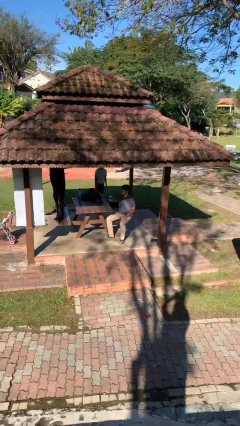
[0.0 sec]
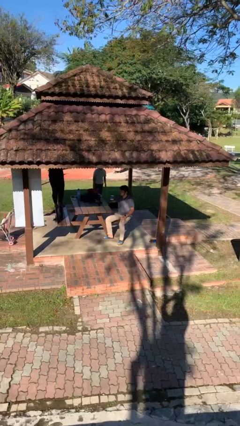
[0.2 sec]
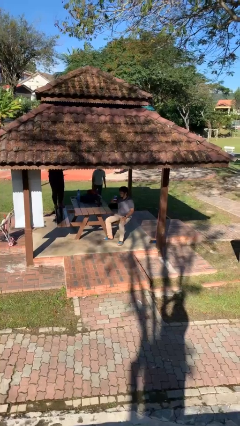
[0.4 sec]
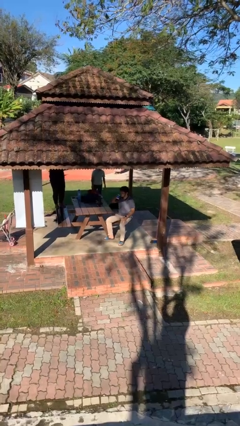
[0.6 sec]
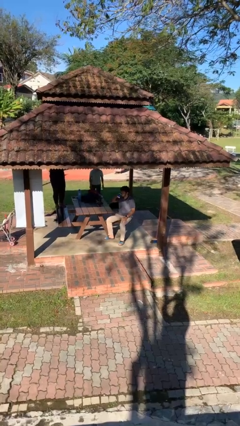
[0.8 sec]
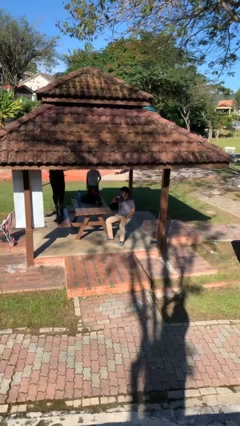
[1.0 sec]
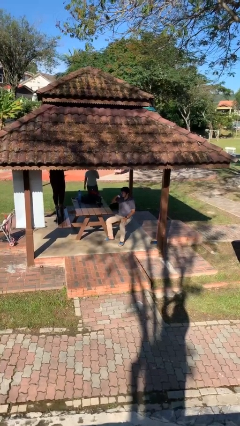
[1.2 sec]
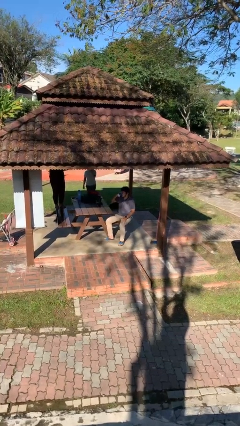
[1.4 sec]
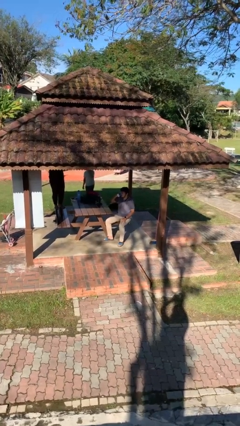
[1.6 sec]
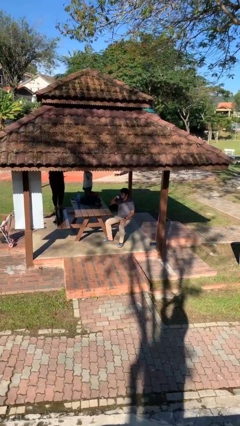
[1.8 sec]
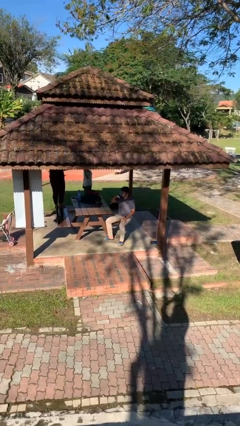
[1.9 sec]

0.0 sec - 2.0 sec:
person drinks from mug

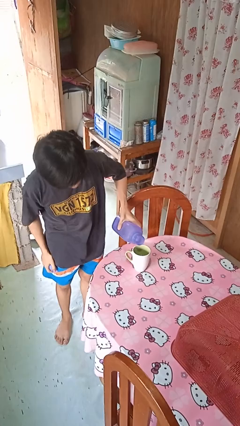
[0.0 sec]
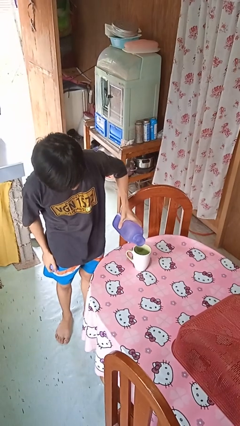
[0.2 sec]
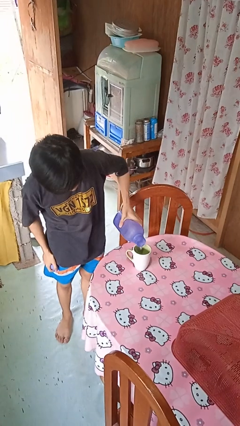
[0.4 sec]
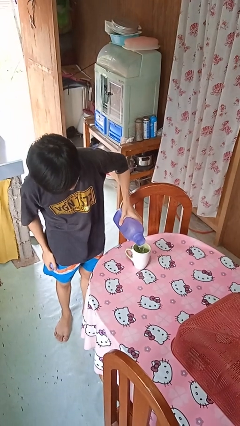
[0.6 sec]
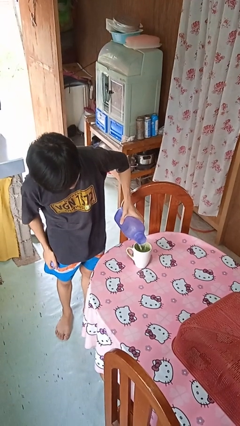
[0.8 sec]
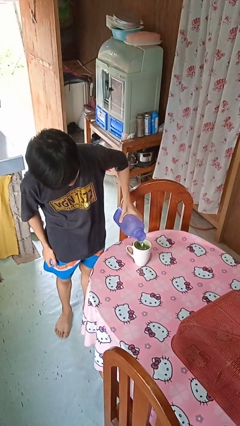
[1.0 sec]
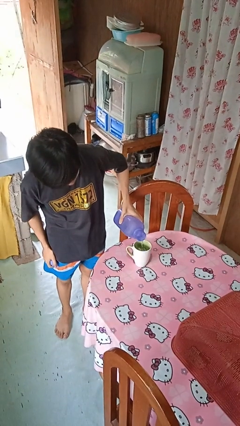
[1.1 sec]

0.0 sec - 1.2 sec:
person pours liquid into cup

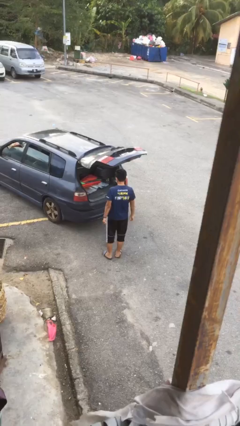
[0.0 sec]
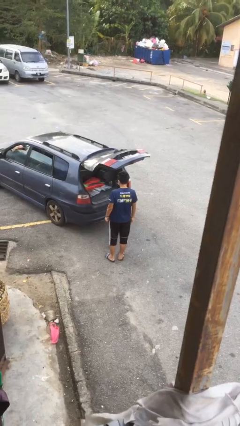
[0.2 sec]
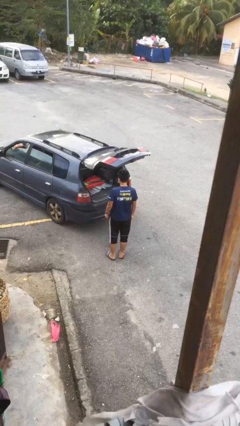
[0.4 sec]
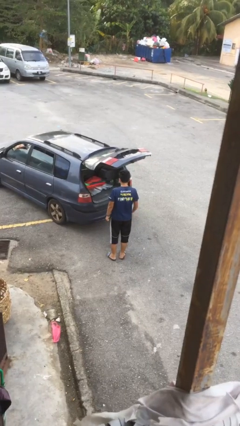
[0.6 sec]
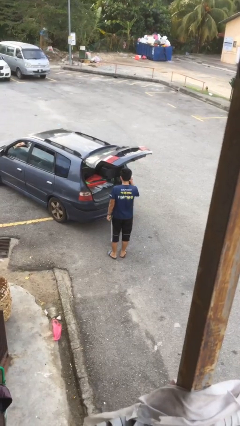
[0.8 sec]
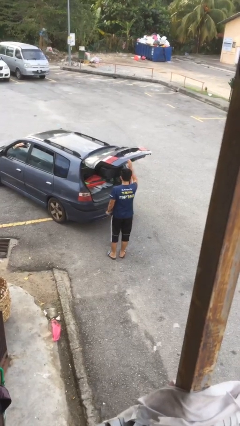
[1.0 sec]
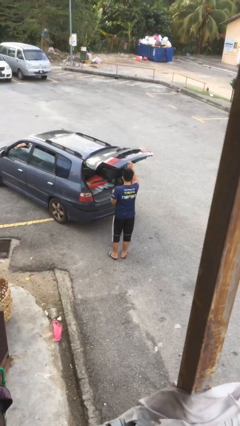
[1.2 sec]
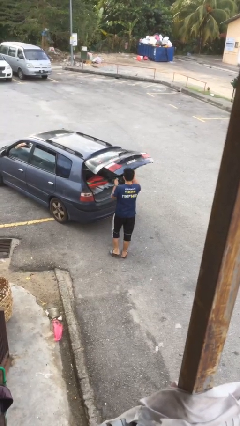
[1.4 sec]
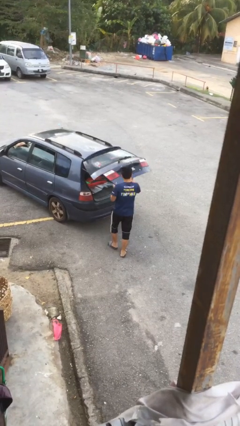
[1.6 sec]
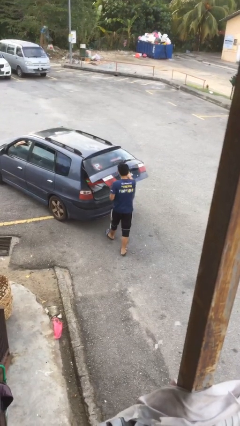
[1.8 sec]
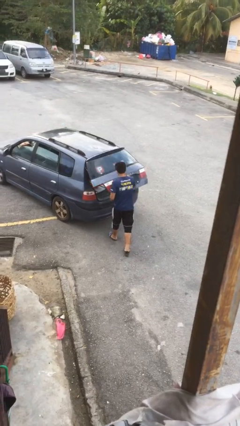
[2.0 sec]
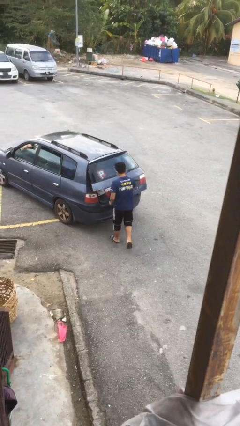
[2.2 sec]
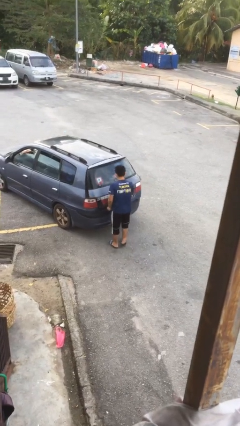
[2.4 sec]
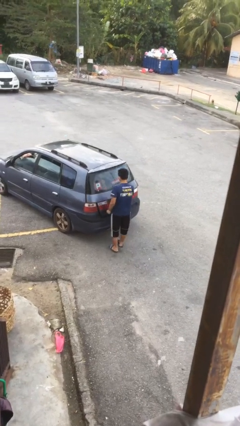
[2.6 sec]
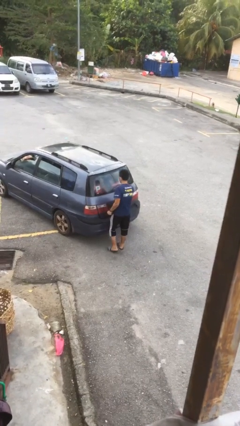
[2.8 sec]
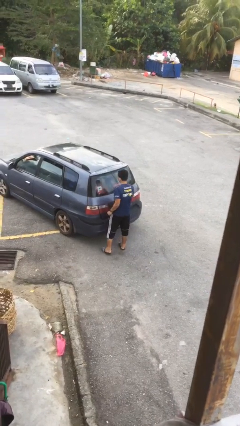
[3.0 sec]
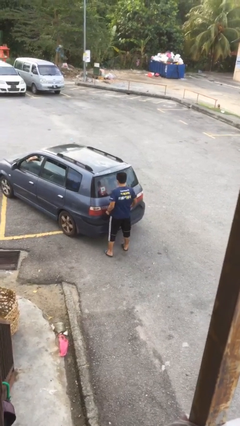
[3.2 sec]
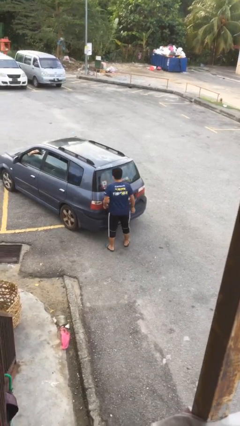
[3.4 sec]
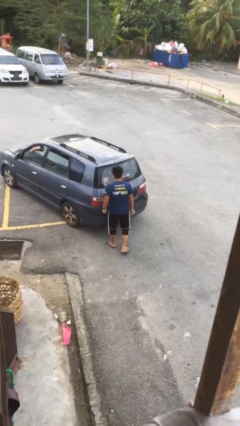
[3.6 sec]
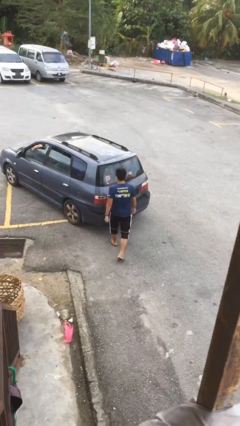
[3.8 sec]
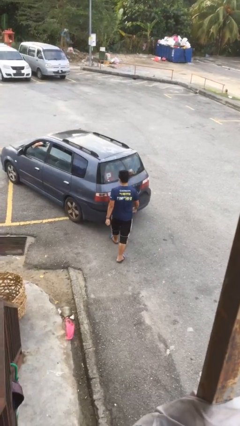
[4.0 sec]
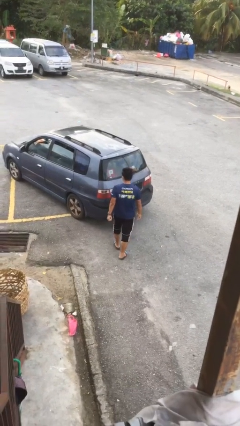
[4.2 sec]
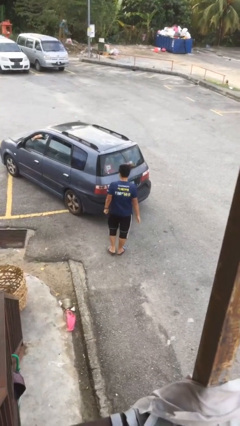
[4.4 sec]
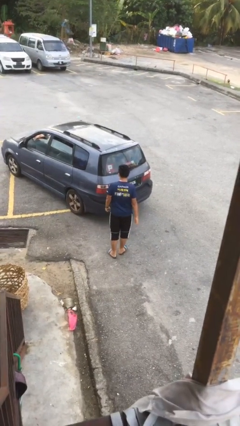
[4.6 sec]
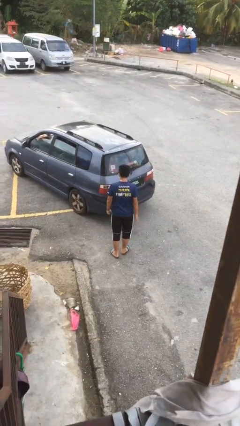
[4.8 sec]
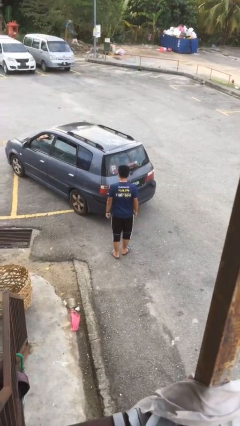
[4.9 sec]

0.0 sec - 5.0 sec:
person closes car trunk

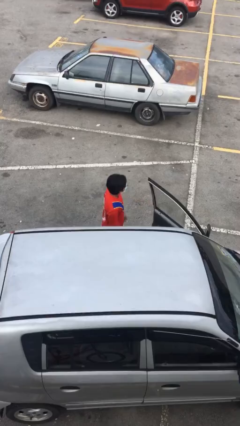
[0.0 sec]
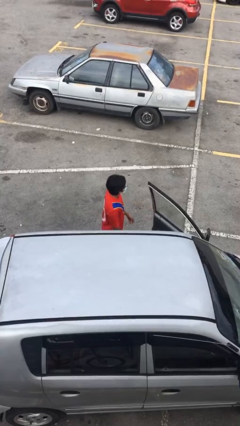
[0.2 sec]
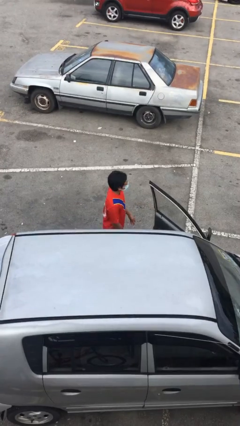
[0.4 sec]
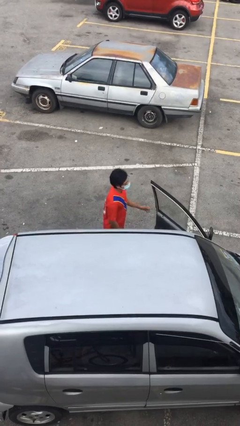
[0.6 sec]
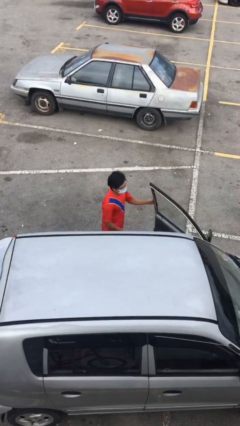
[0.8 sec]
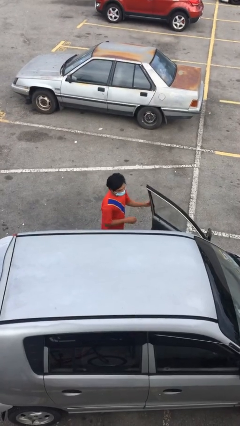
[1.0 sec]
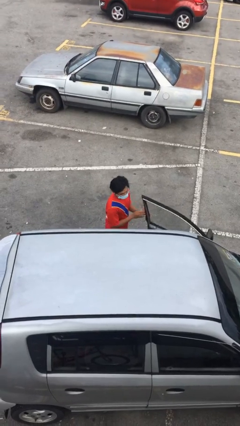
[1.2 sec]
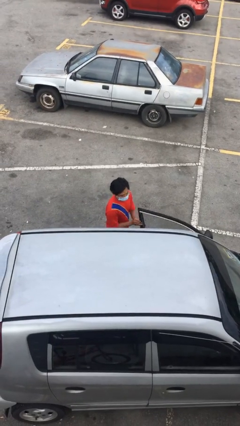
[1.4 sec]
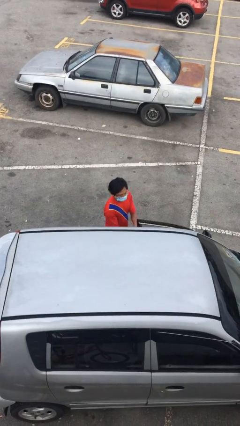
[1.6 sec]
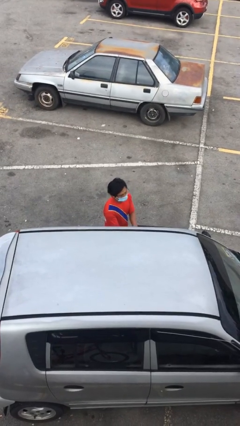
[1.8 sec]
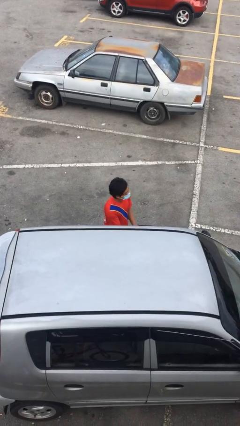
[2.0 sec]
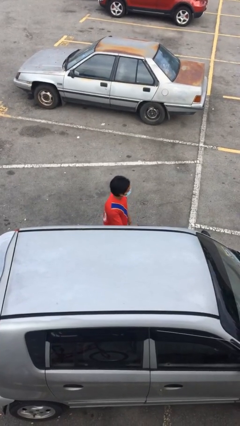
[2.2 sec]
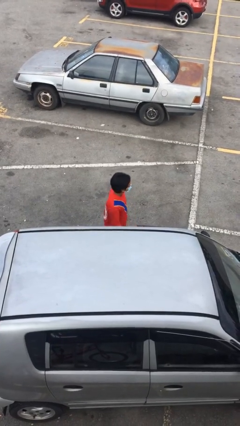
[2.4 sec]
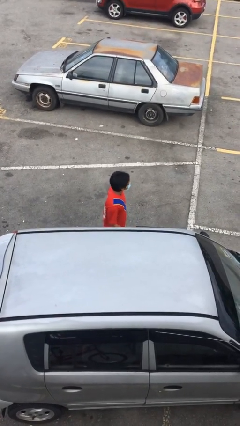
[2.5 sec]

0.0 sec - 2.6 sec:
person closes car door

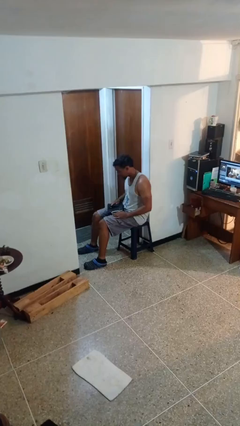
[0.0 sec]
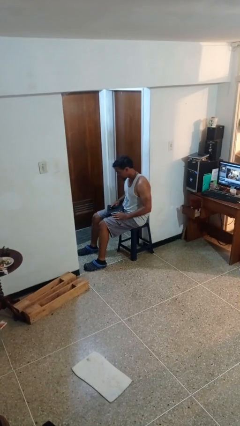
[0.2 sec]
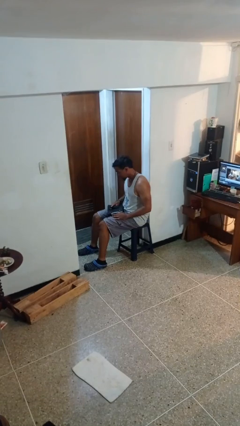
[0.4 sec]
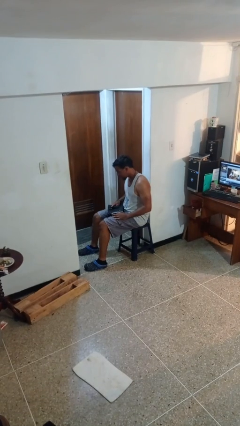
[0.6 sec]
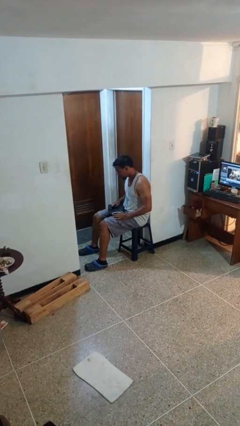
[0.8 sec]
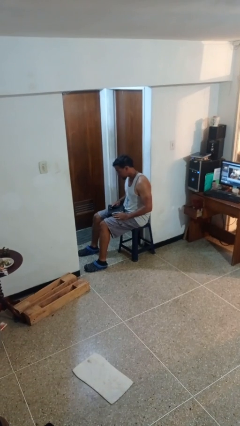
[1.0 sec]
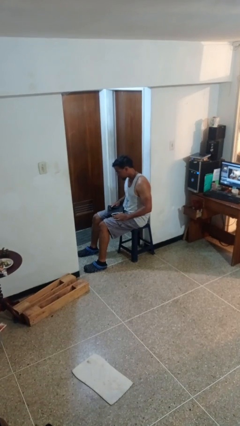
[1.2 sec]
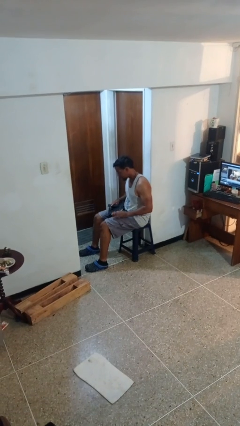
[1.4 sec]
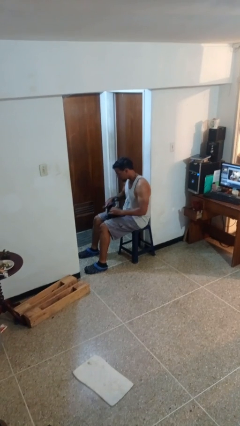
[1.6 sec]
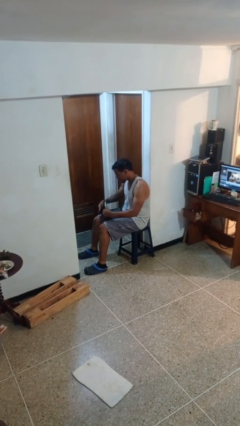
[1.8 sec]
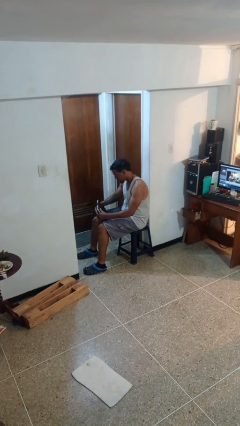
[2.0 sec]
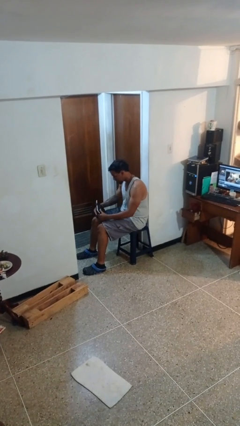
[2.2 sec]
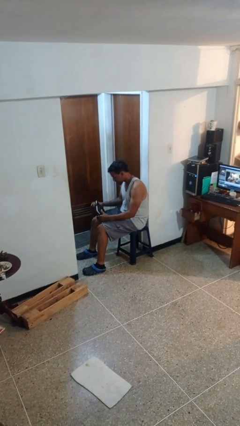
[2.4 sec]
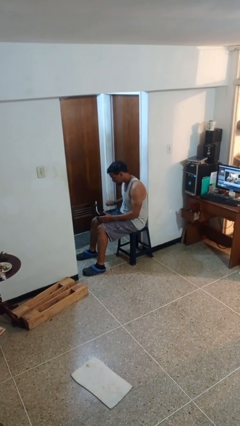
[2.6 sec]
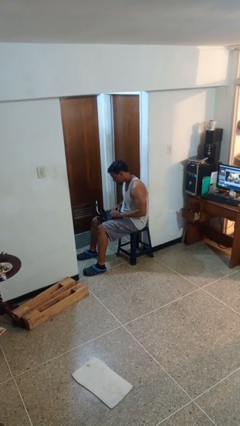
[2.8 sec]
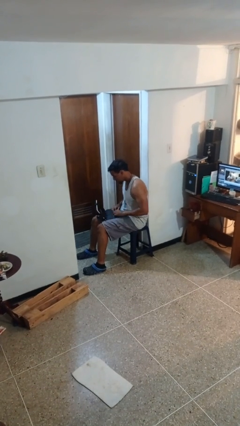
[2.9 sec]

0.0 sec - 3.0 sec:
person opens laptop

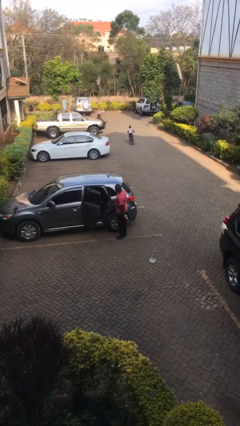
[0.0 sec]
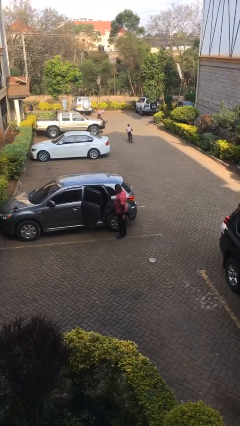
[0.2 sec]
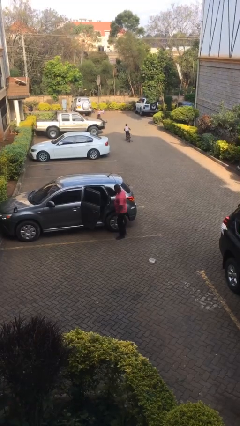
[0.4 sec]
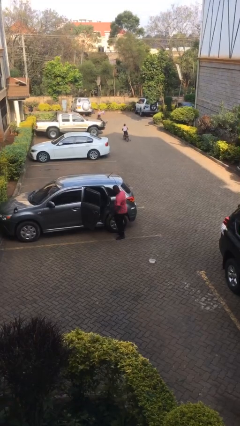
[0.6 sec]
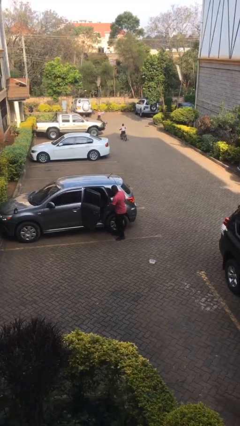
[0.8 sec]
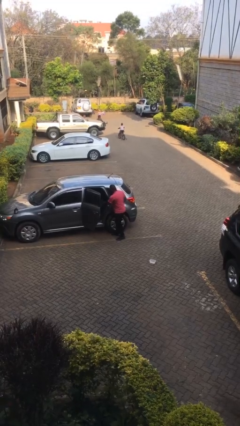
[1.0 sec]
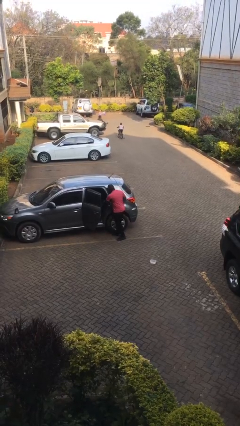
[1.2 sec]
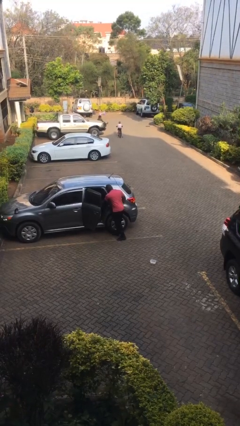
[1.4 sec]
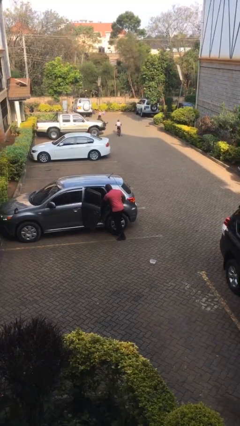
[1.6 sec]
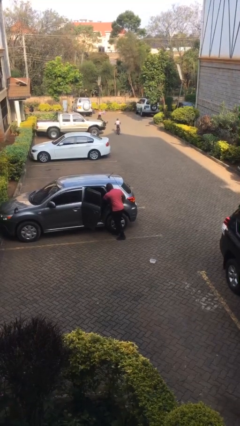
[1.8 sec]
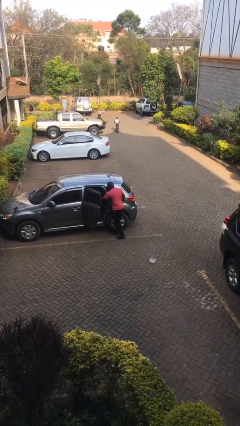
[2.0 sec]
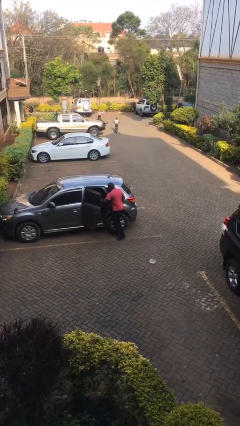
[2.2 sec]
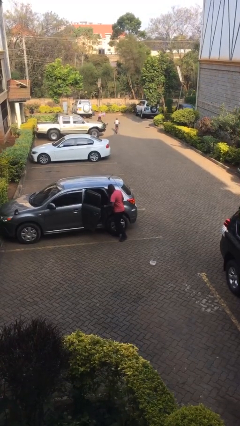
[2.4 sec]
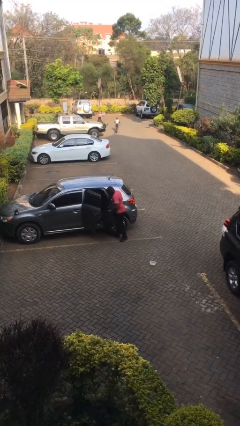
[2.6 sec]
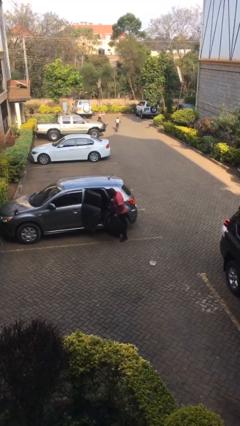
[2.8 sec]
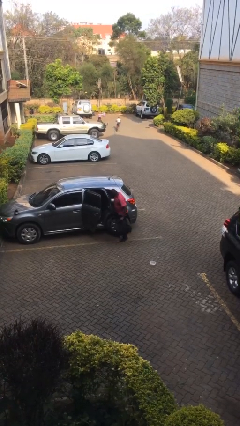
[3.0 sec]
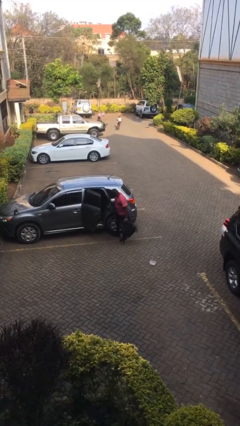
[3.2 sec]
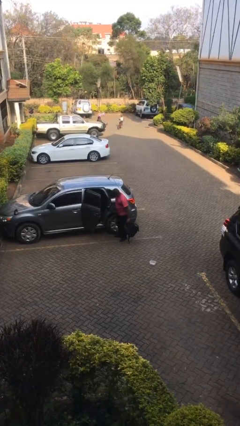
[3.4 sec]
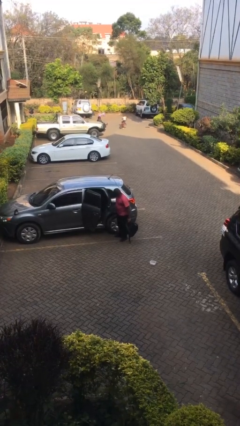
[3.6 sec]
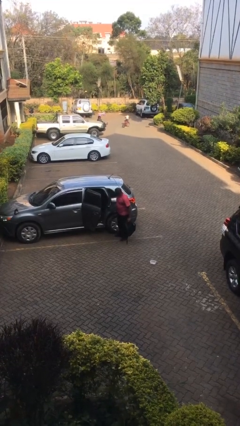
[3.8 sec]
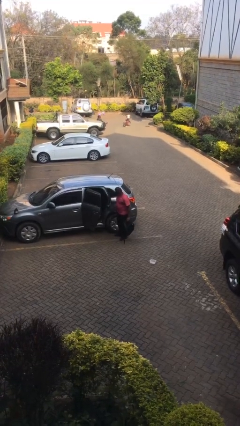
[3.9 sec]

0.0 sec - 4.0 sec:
person unloads car
